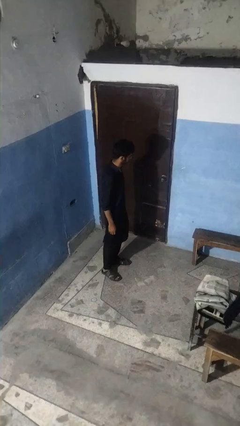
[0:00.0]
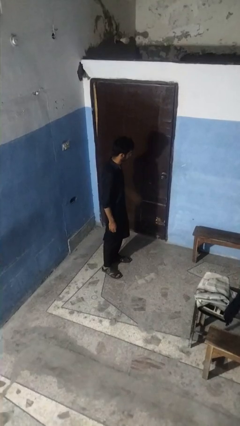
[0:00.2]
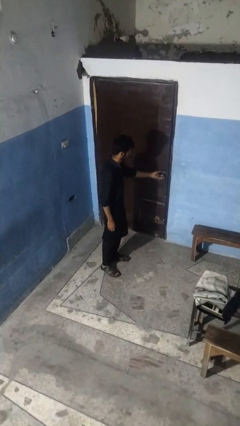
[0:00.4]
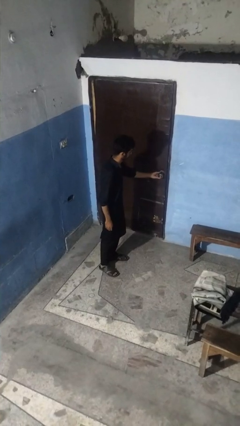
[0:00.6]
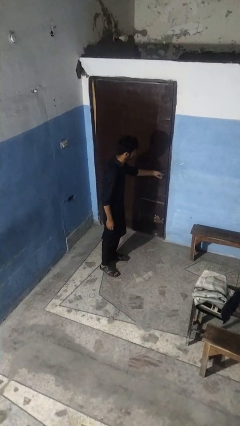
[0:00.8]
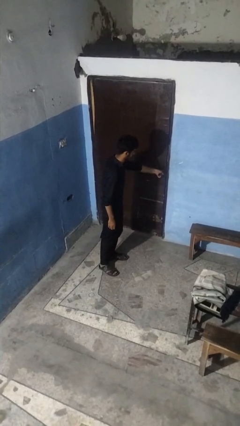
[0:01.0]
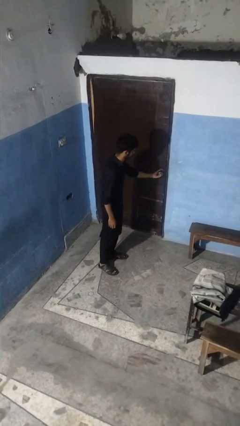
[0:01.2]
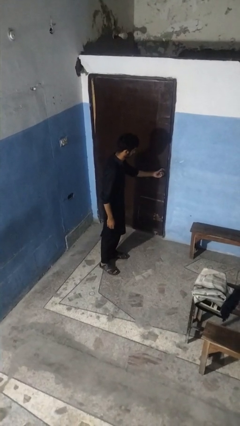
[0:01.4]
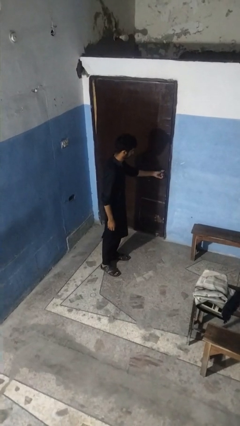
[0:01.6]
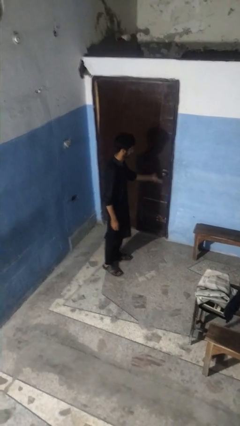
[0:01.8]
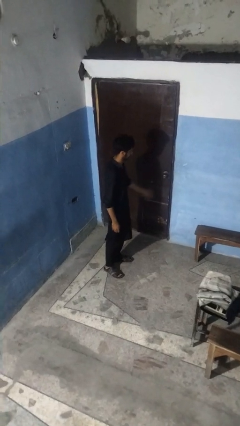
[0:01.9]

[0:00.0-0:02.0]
person locks door with keys

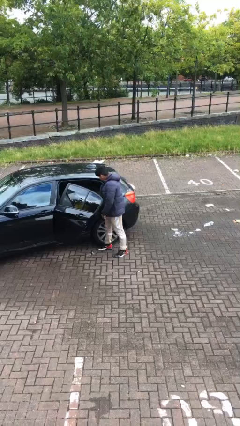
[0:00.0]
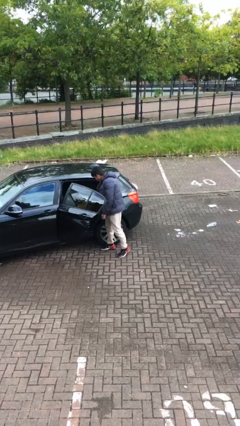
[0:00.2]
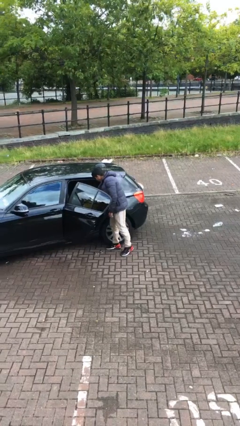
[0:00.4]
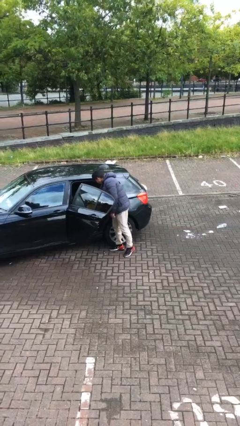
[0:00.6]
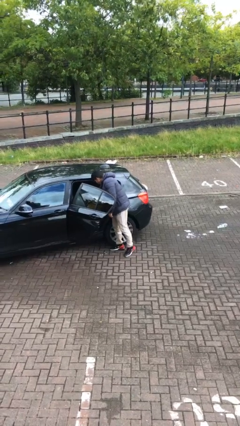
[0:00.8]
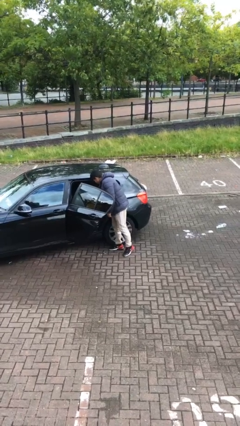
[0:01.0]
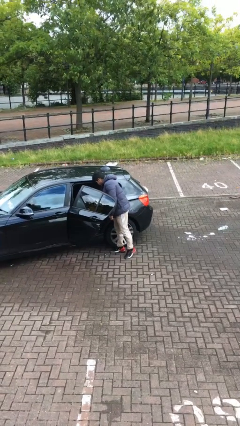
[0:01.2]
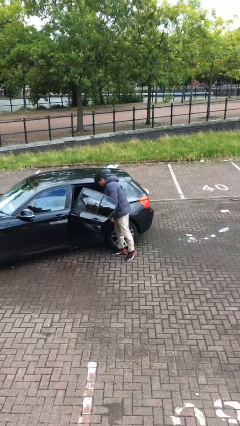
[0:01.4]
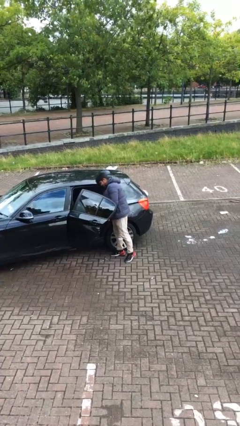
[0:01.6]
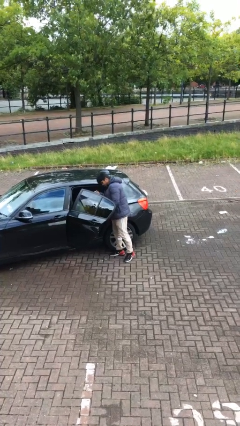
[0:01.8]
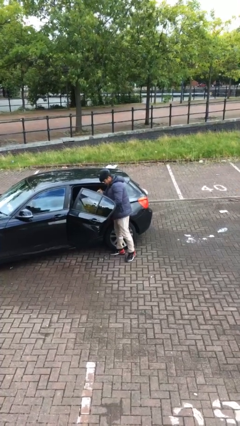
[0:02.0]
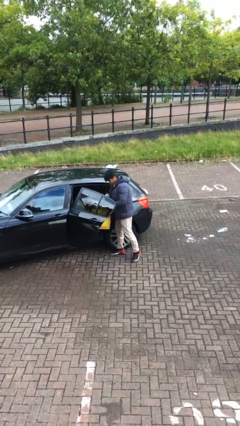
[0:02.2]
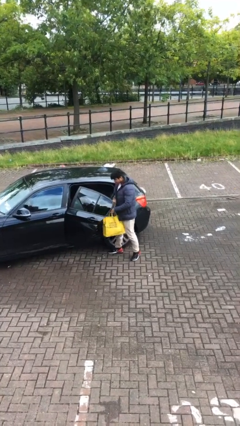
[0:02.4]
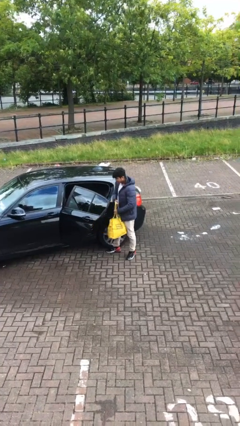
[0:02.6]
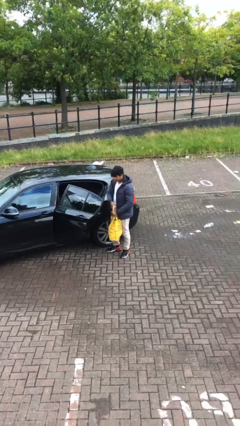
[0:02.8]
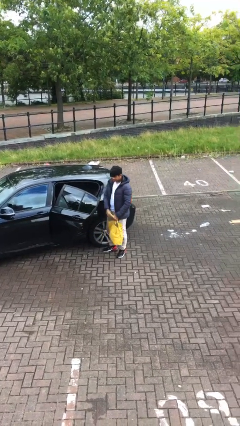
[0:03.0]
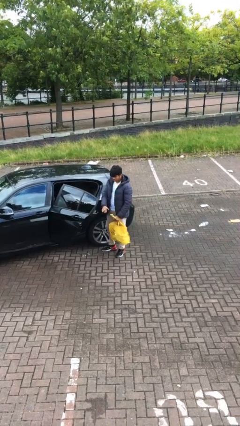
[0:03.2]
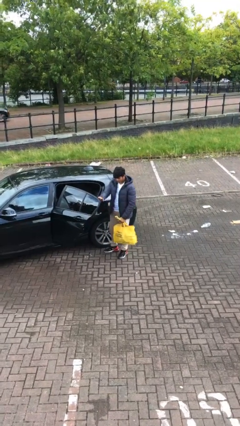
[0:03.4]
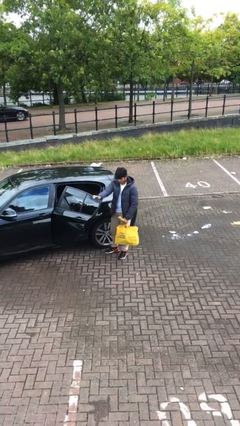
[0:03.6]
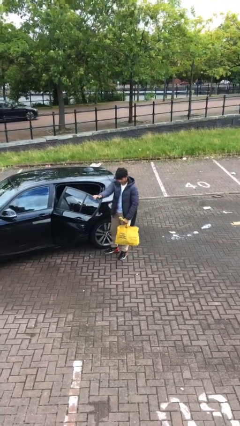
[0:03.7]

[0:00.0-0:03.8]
person unloads car

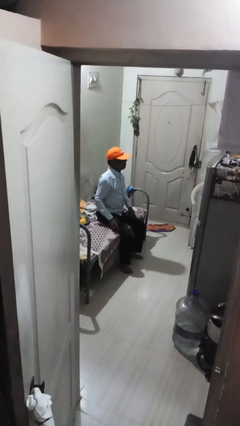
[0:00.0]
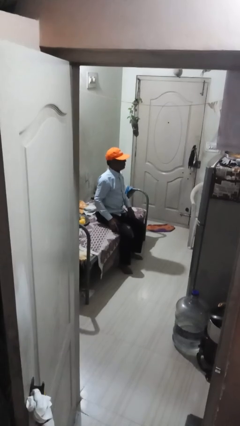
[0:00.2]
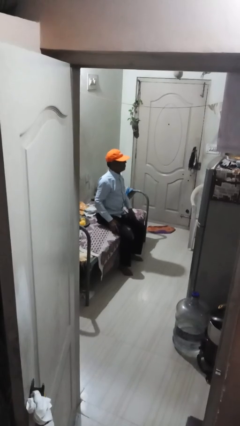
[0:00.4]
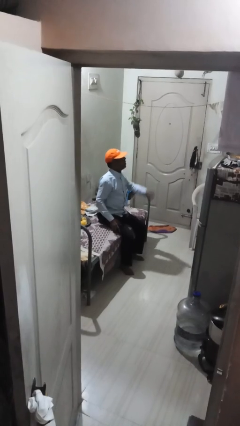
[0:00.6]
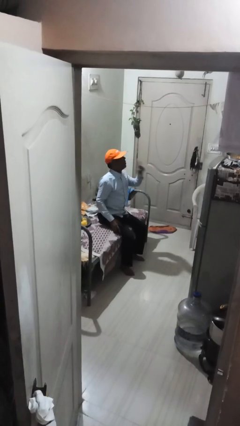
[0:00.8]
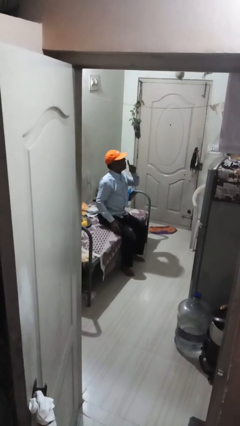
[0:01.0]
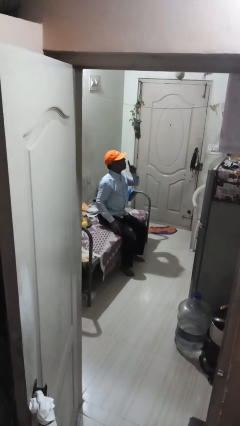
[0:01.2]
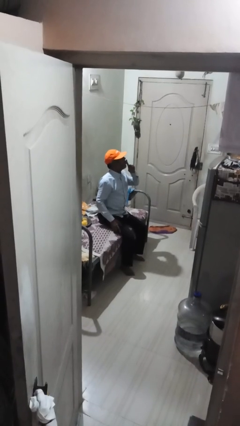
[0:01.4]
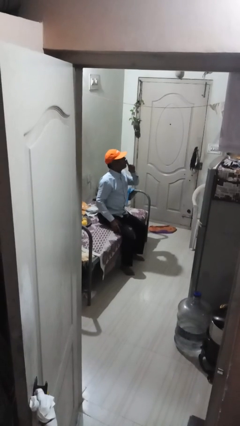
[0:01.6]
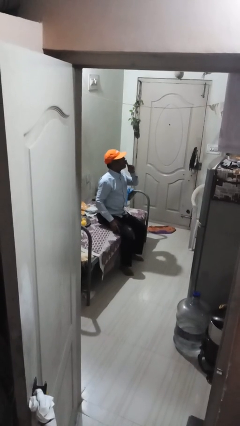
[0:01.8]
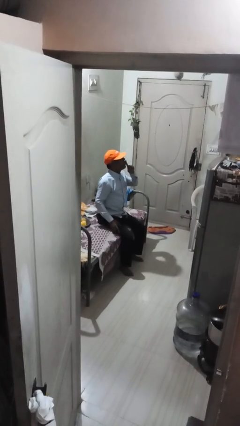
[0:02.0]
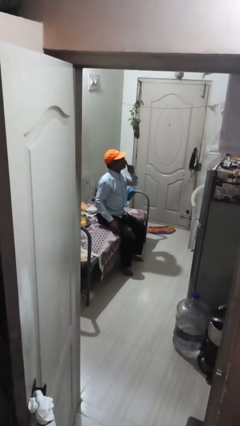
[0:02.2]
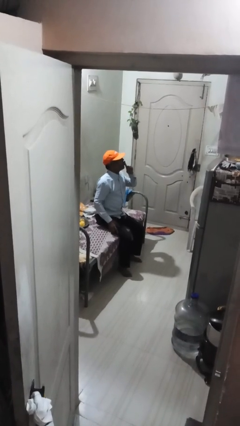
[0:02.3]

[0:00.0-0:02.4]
person gestures be quiet

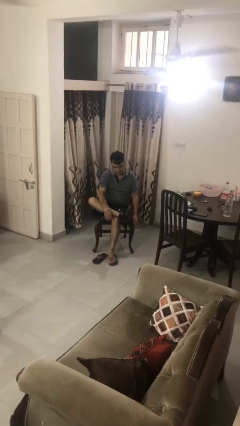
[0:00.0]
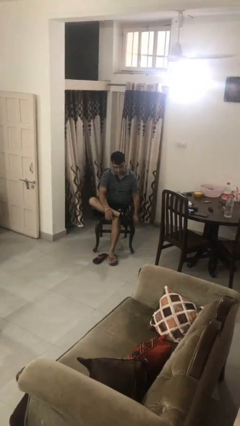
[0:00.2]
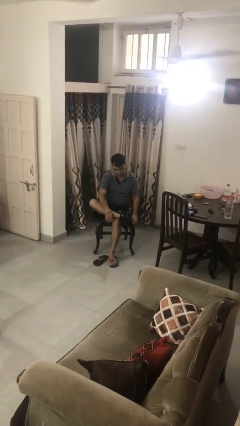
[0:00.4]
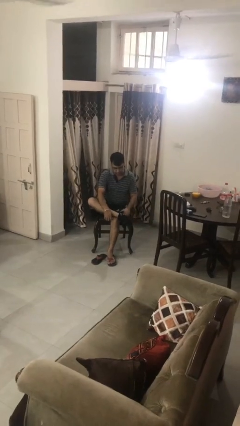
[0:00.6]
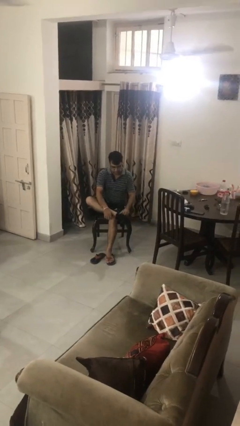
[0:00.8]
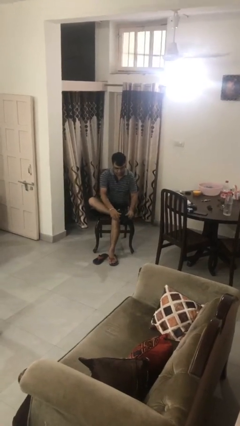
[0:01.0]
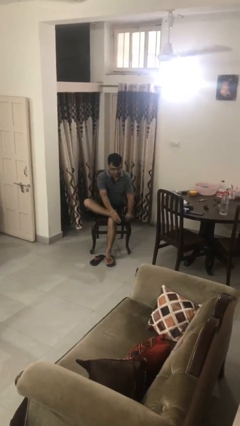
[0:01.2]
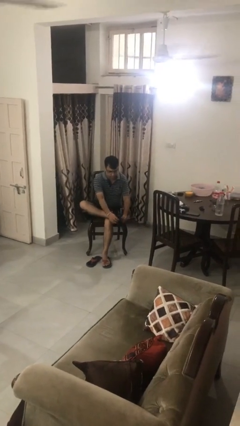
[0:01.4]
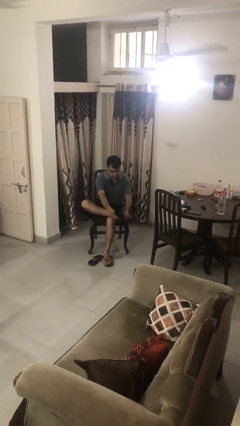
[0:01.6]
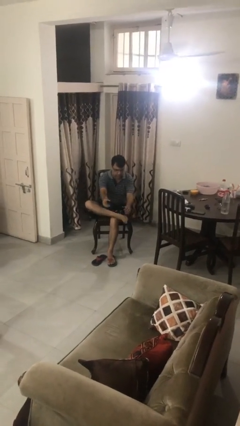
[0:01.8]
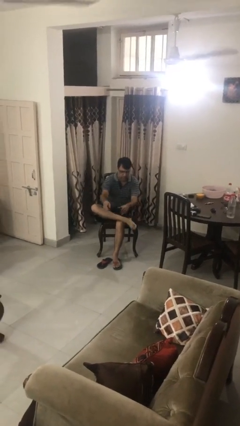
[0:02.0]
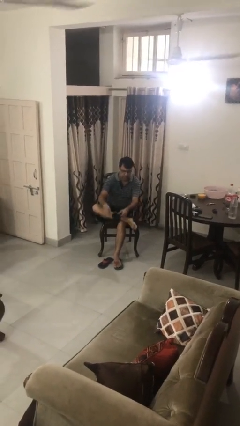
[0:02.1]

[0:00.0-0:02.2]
person takes off socks

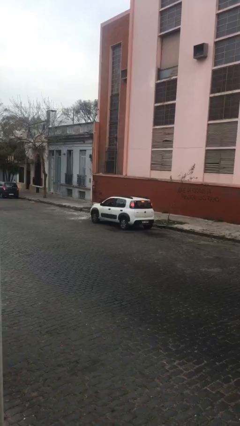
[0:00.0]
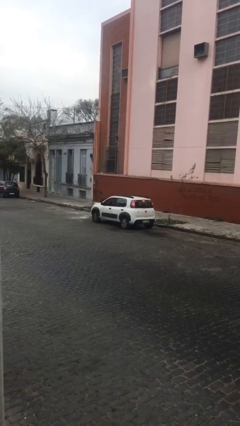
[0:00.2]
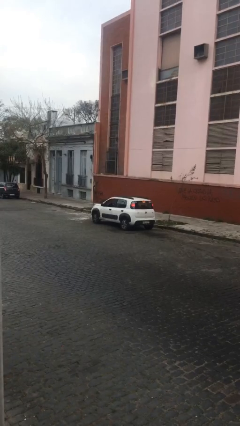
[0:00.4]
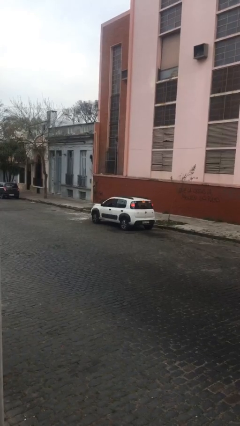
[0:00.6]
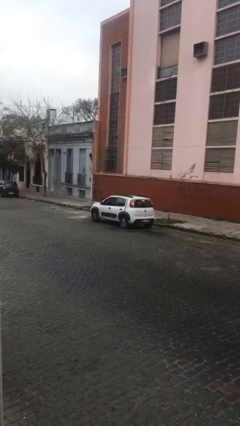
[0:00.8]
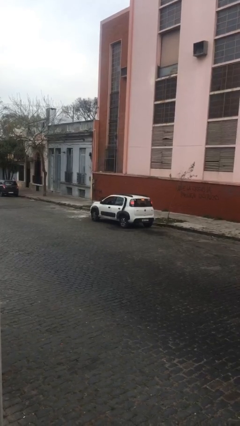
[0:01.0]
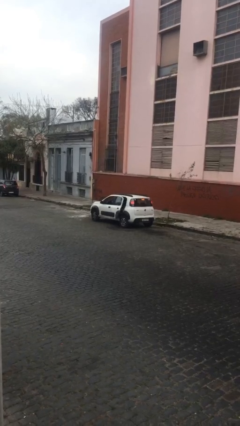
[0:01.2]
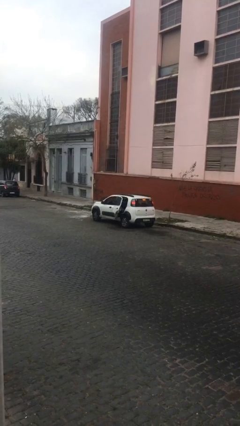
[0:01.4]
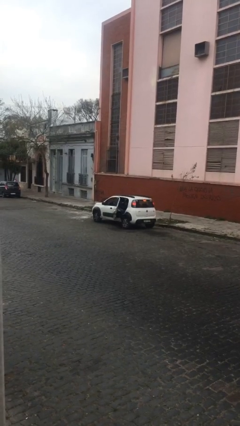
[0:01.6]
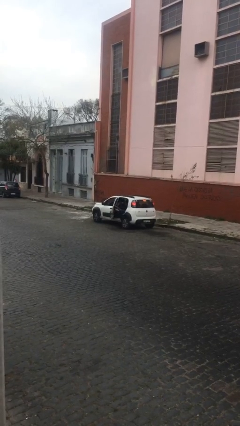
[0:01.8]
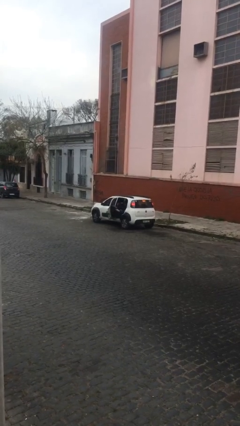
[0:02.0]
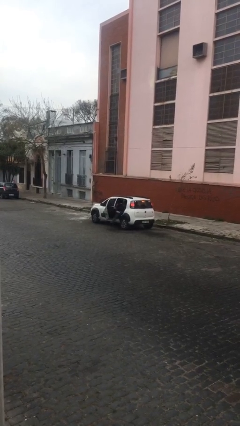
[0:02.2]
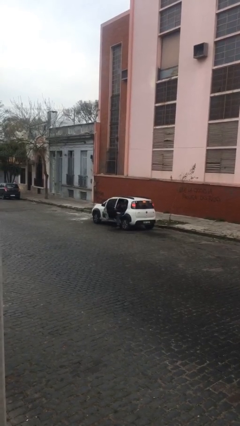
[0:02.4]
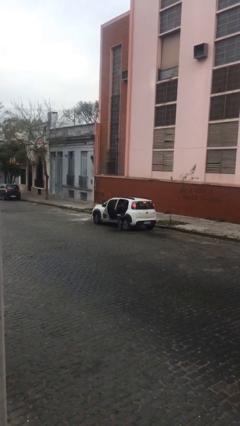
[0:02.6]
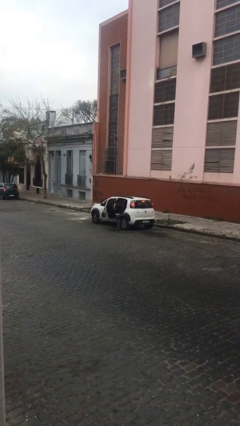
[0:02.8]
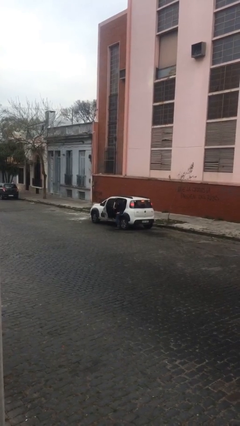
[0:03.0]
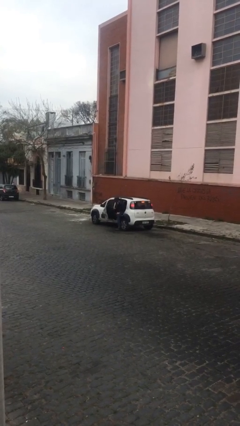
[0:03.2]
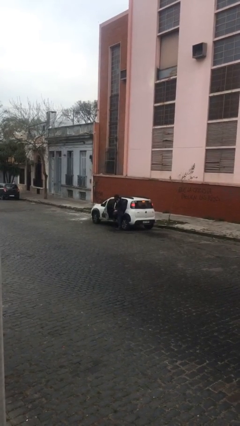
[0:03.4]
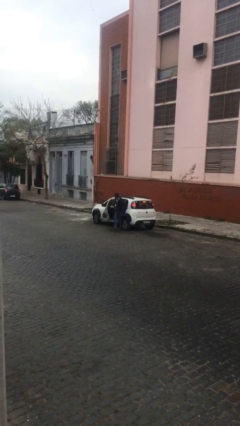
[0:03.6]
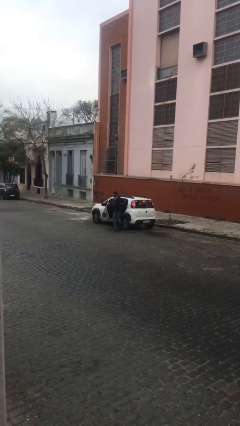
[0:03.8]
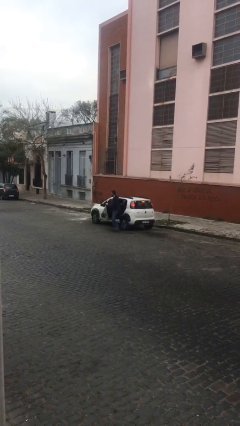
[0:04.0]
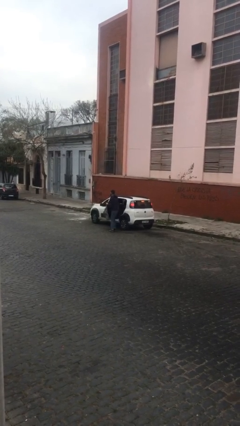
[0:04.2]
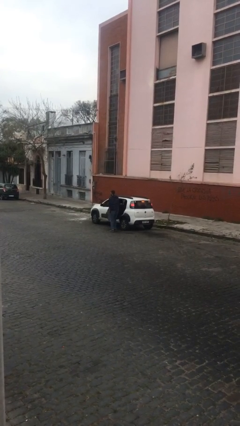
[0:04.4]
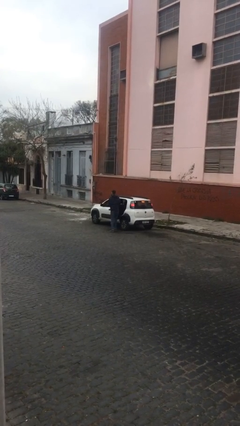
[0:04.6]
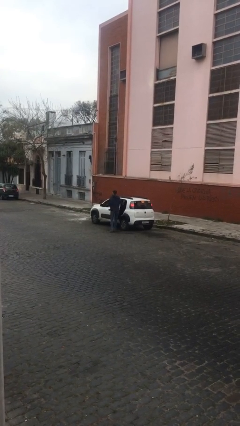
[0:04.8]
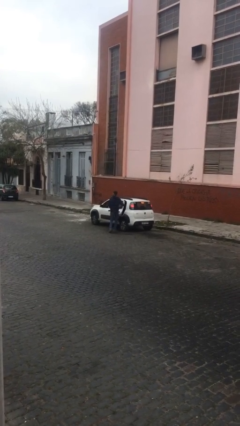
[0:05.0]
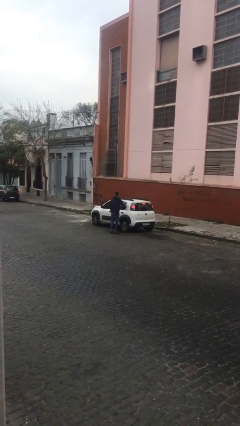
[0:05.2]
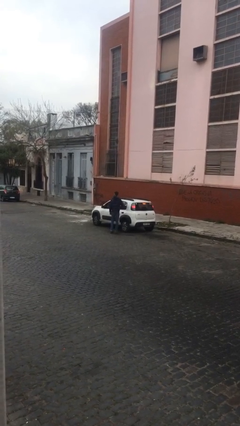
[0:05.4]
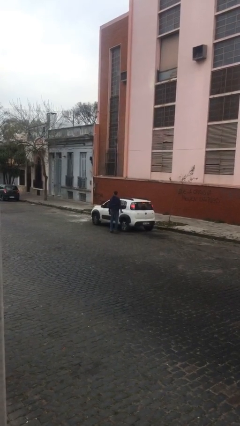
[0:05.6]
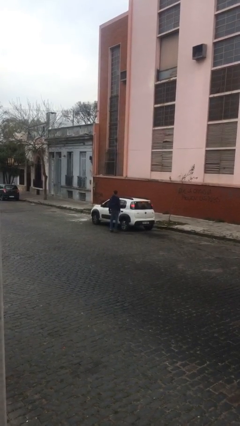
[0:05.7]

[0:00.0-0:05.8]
car drops off person

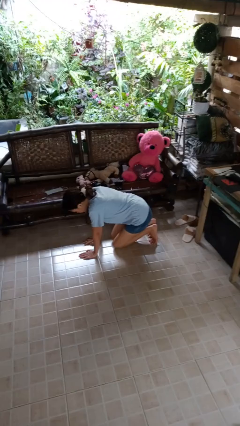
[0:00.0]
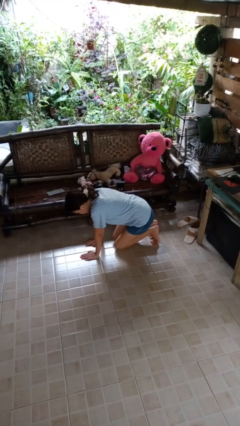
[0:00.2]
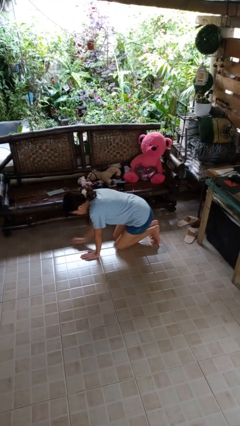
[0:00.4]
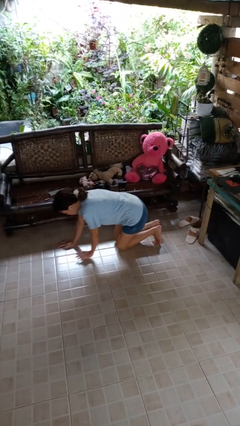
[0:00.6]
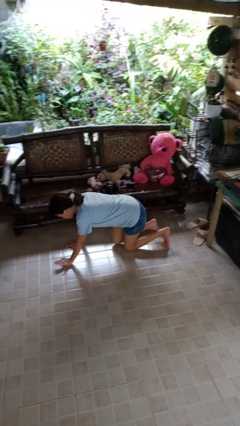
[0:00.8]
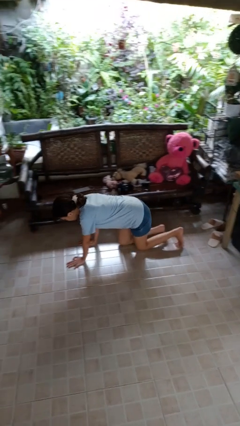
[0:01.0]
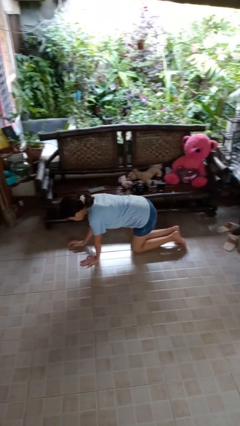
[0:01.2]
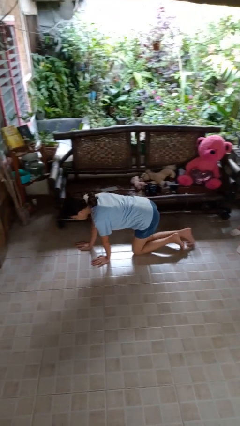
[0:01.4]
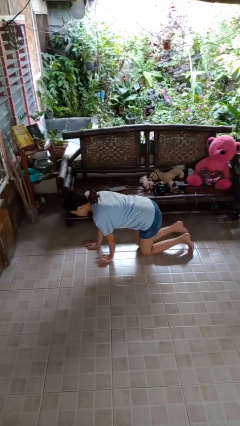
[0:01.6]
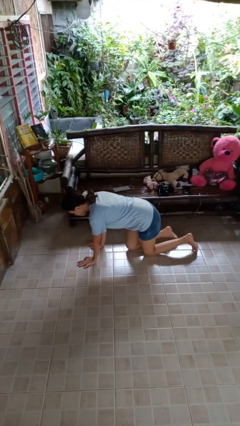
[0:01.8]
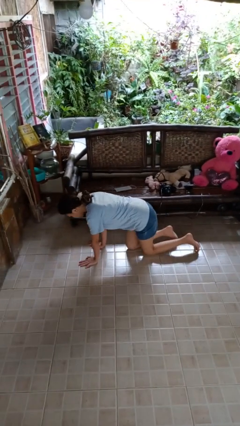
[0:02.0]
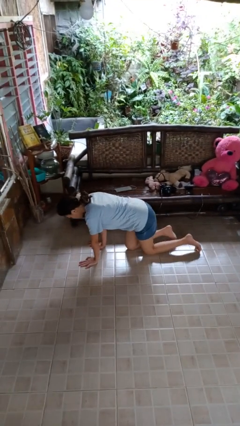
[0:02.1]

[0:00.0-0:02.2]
person crawls
